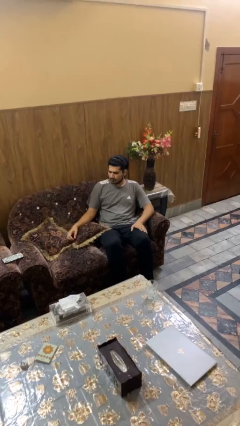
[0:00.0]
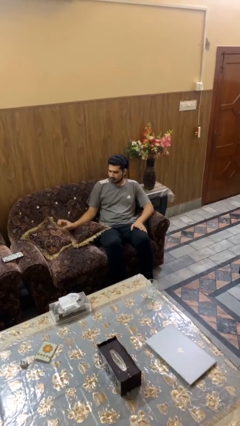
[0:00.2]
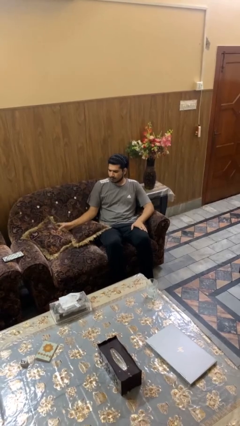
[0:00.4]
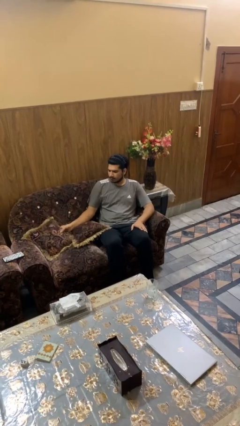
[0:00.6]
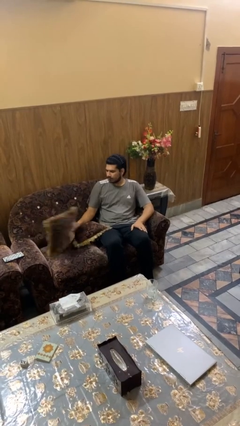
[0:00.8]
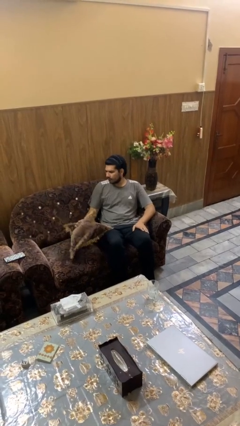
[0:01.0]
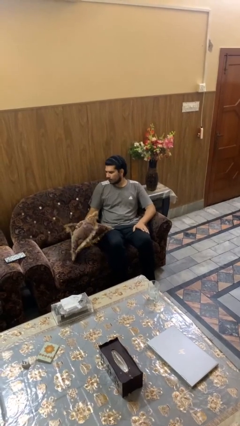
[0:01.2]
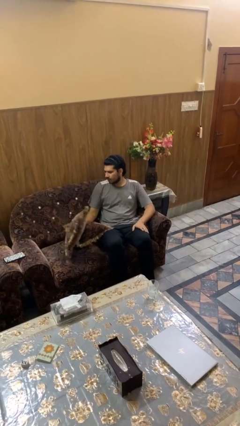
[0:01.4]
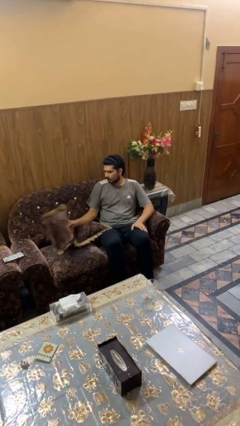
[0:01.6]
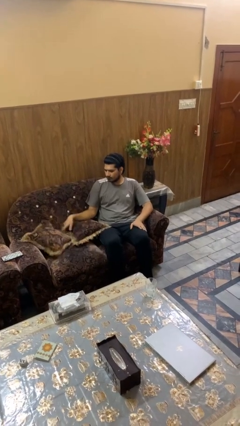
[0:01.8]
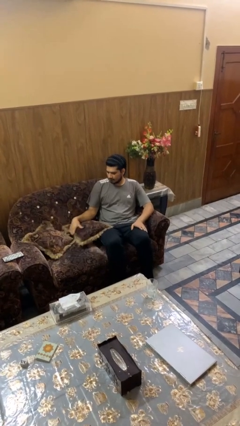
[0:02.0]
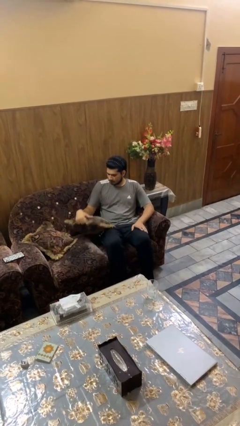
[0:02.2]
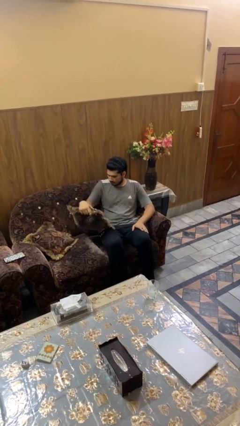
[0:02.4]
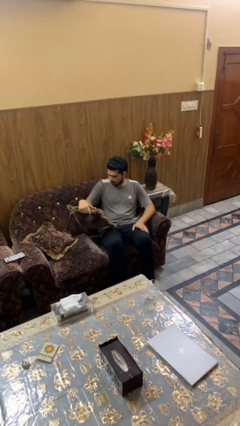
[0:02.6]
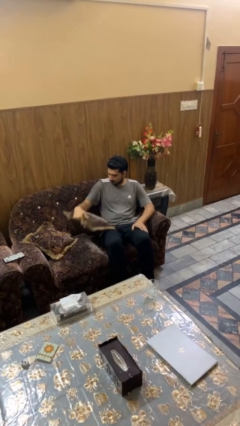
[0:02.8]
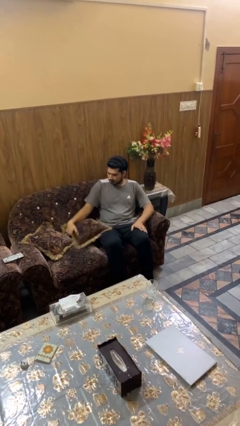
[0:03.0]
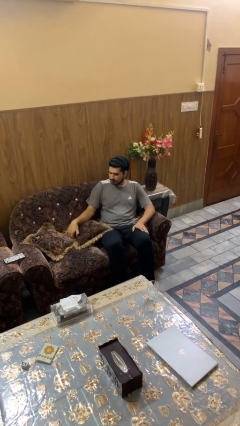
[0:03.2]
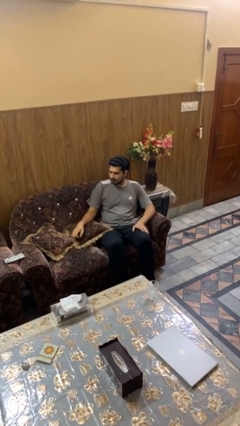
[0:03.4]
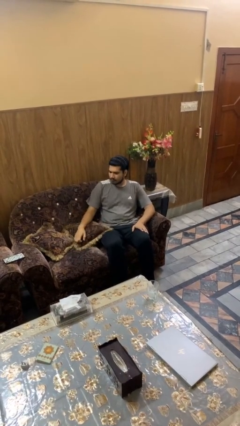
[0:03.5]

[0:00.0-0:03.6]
person searches in couch

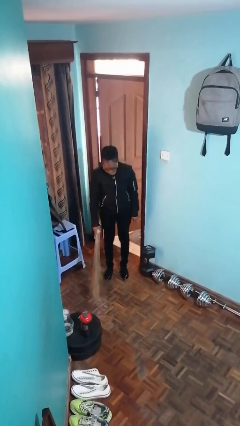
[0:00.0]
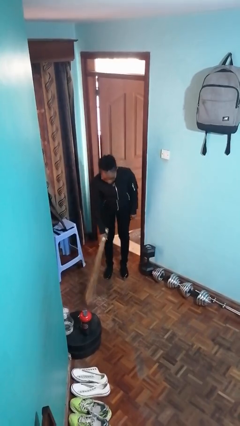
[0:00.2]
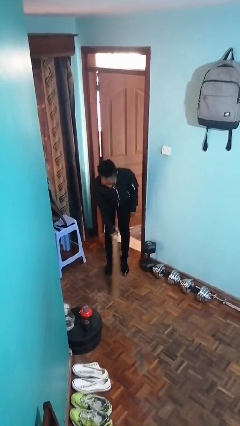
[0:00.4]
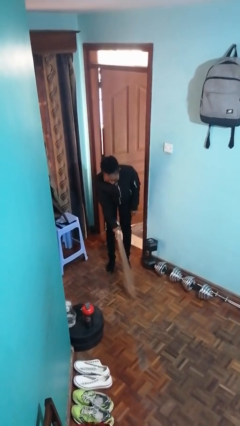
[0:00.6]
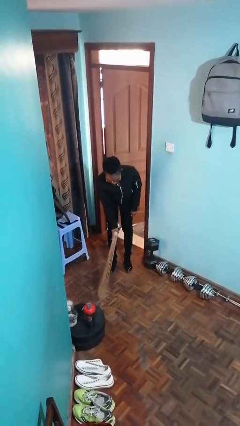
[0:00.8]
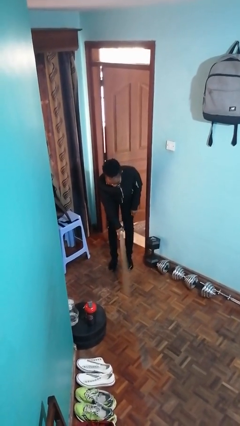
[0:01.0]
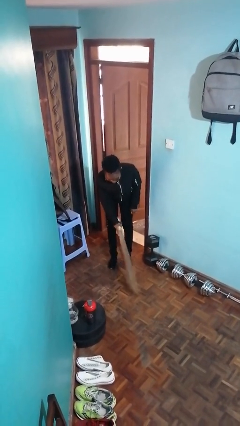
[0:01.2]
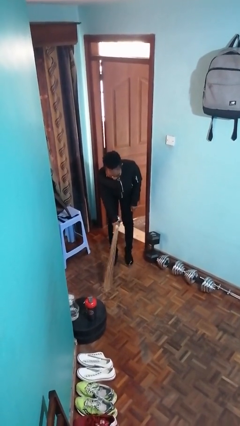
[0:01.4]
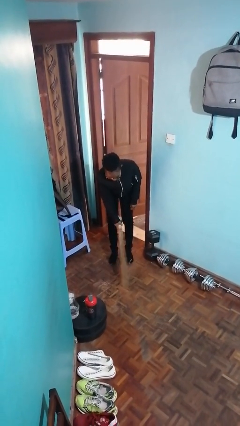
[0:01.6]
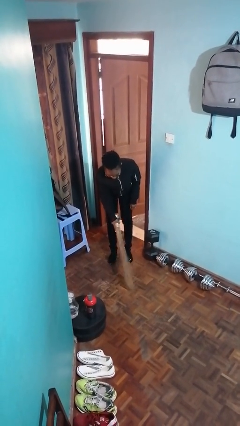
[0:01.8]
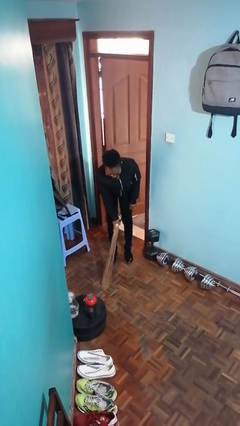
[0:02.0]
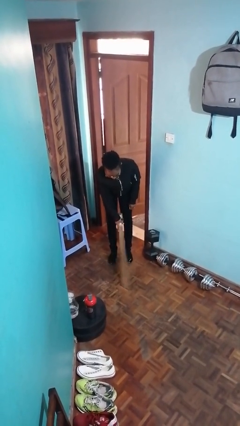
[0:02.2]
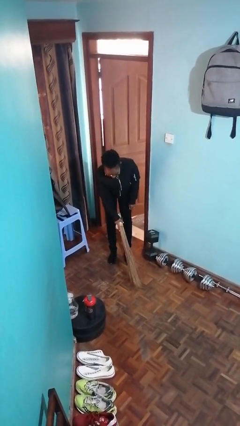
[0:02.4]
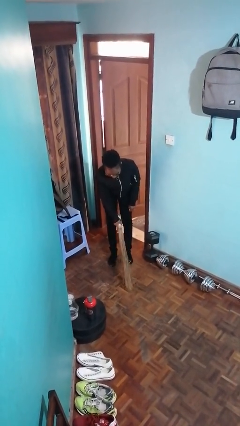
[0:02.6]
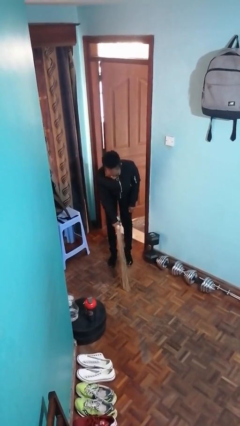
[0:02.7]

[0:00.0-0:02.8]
person sweeps floor

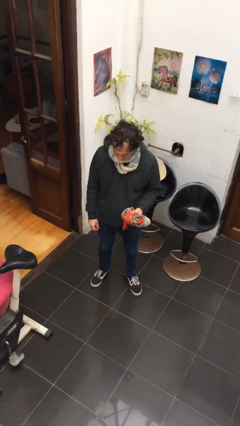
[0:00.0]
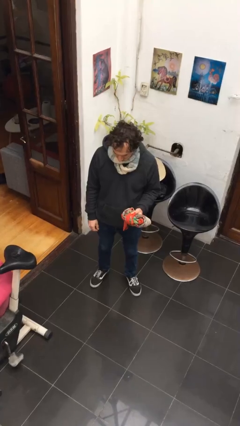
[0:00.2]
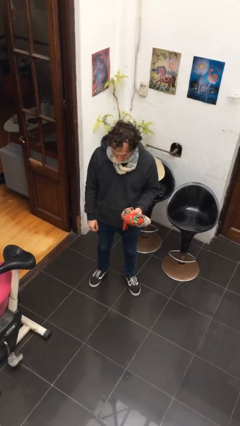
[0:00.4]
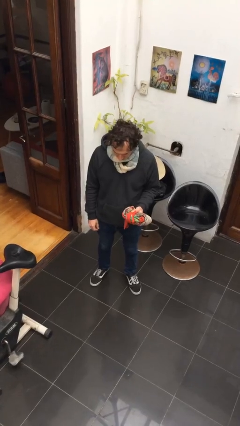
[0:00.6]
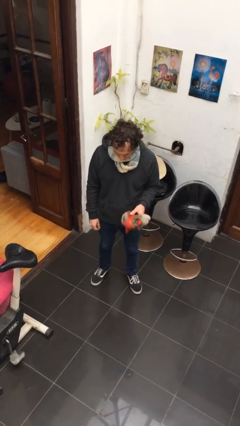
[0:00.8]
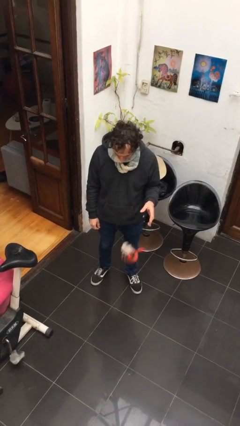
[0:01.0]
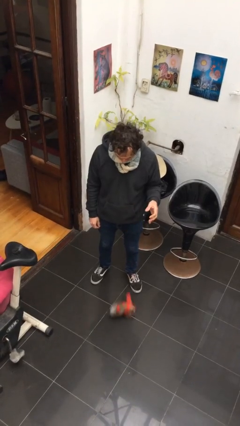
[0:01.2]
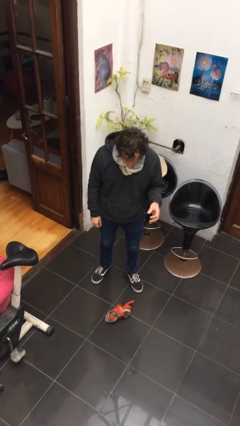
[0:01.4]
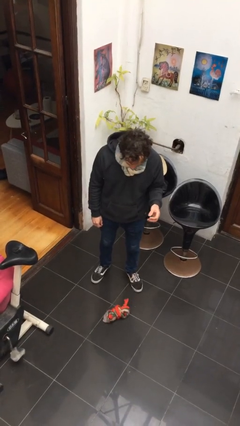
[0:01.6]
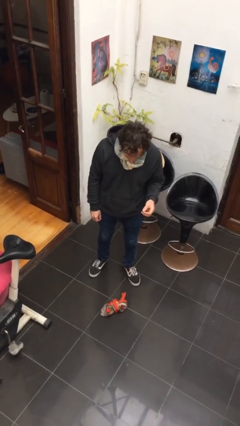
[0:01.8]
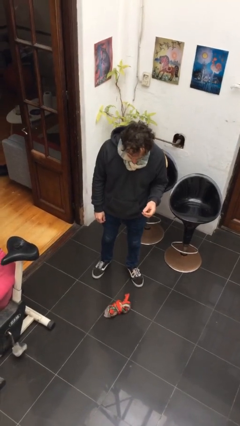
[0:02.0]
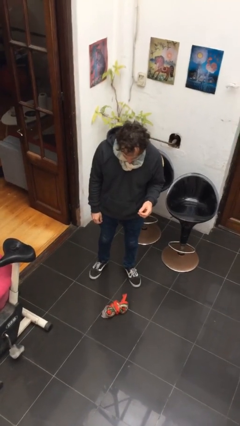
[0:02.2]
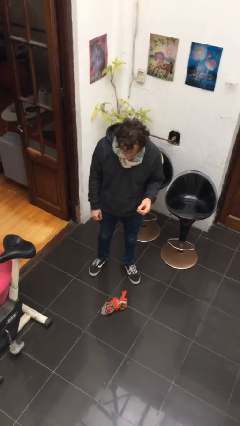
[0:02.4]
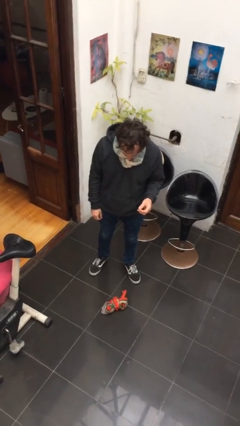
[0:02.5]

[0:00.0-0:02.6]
person drops object

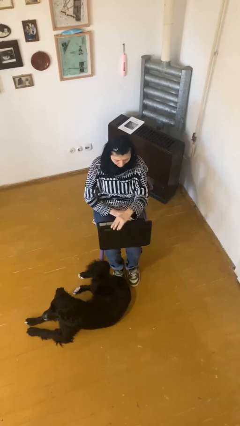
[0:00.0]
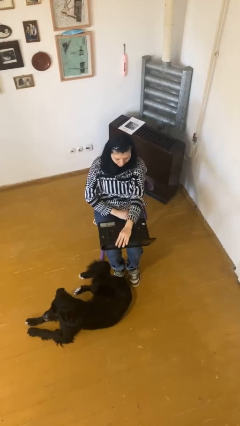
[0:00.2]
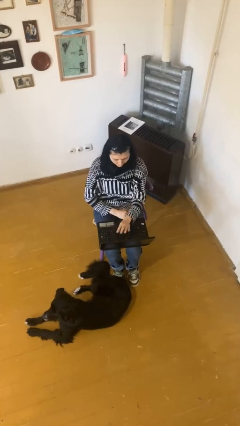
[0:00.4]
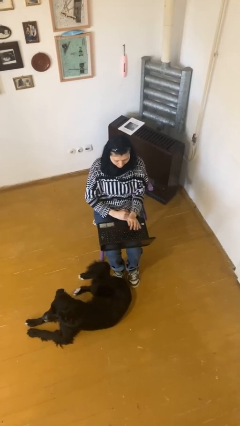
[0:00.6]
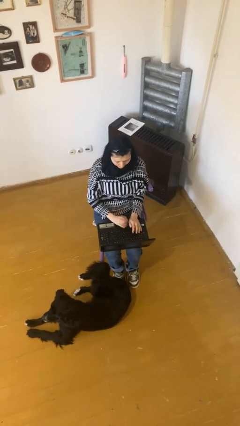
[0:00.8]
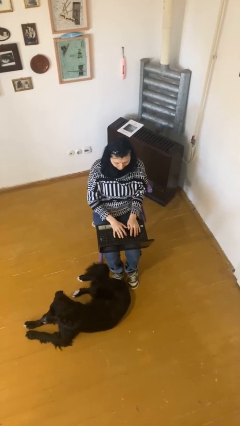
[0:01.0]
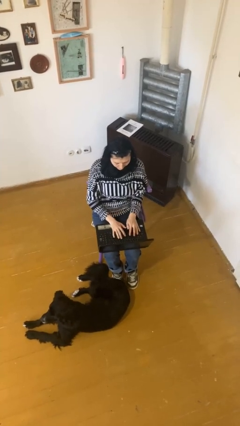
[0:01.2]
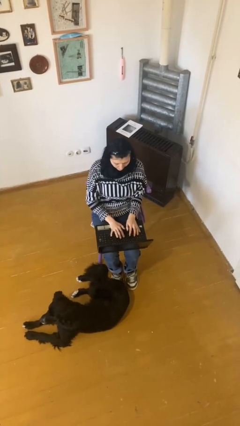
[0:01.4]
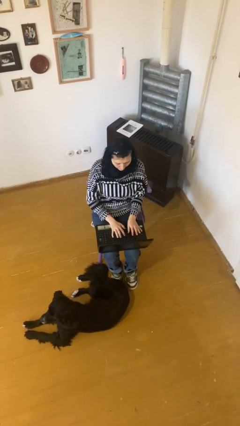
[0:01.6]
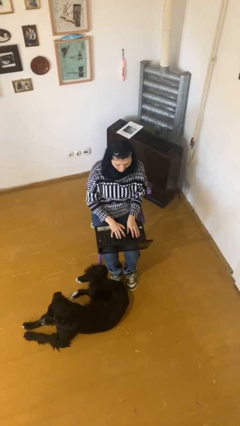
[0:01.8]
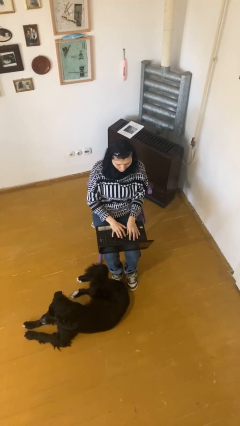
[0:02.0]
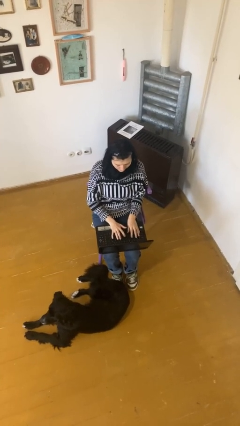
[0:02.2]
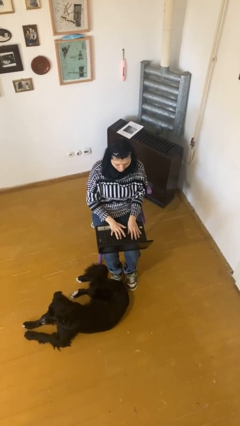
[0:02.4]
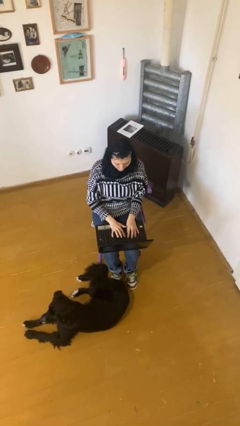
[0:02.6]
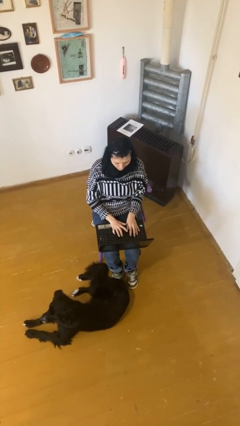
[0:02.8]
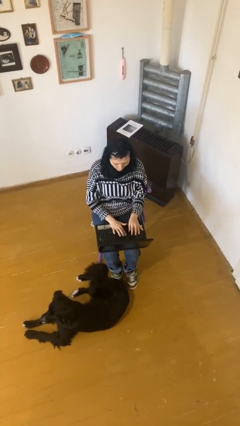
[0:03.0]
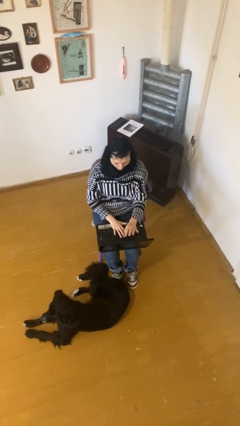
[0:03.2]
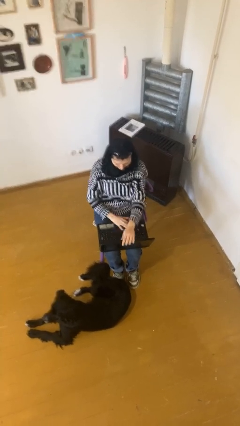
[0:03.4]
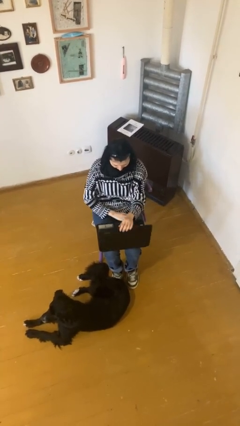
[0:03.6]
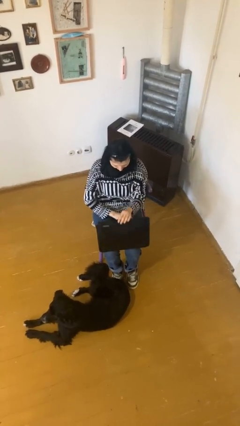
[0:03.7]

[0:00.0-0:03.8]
person interacts with laptop

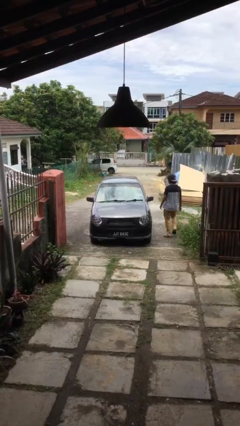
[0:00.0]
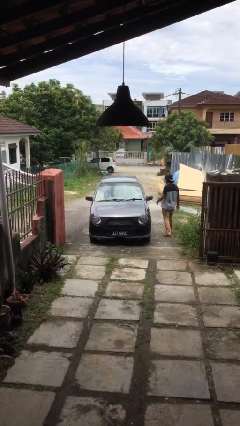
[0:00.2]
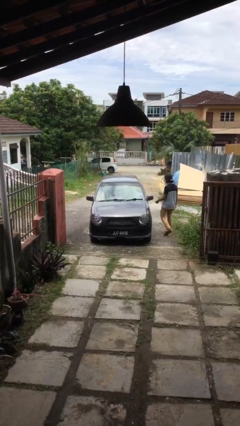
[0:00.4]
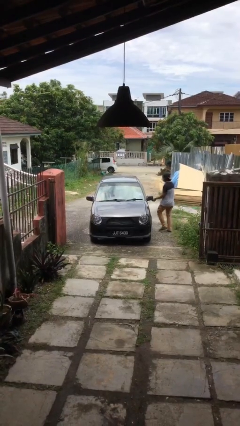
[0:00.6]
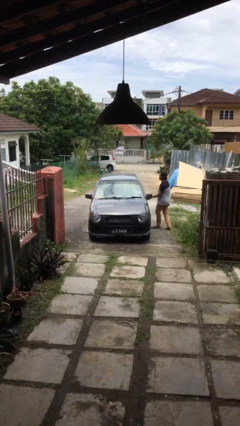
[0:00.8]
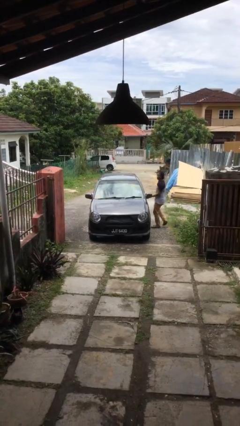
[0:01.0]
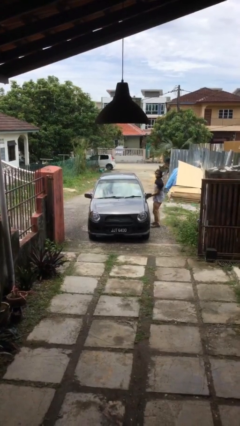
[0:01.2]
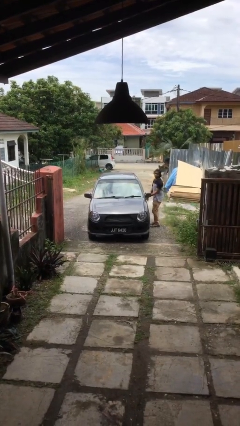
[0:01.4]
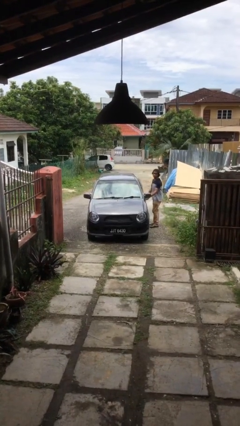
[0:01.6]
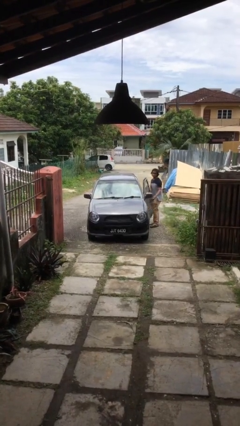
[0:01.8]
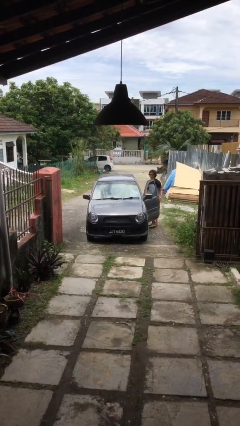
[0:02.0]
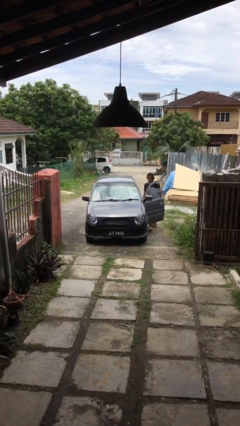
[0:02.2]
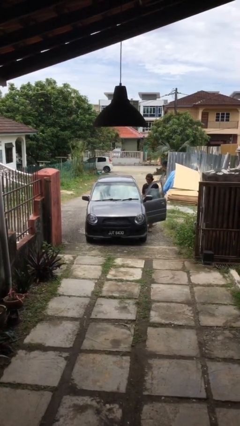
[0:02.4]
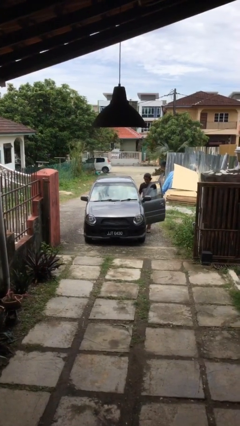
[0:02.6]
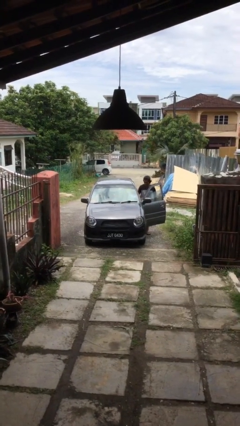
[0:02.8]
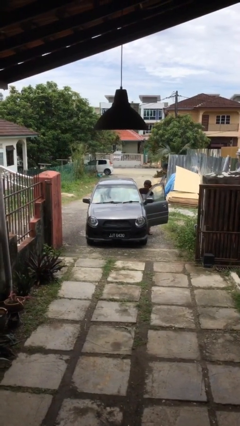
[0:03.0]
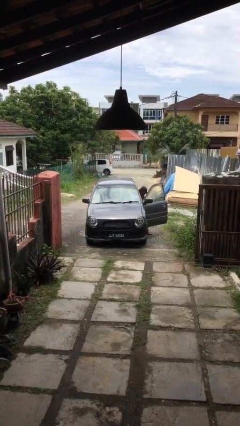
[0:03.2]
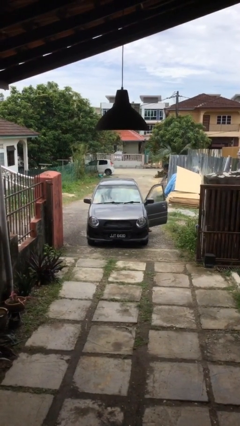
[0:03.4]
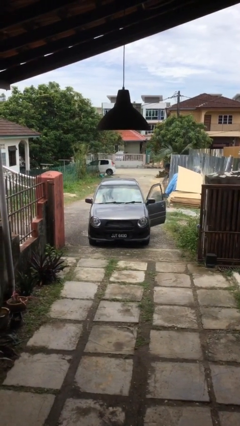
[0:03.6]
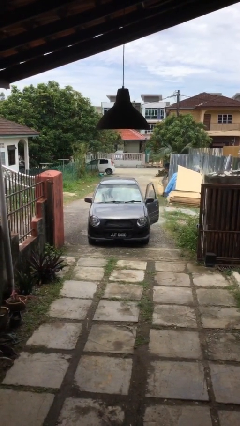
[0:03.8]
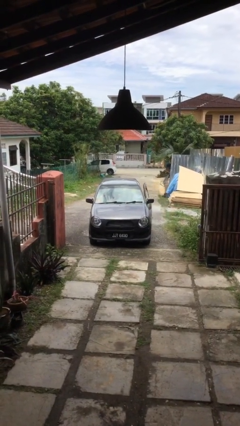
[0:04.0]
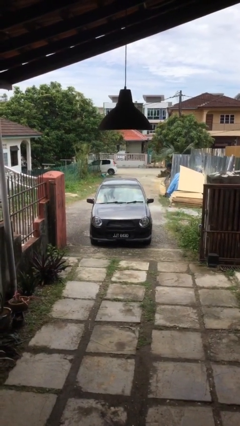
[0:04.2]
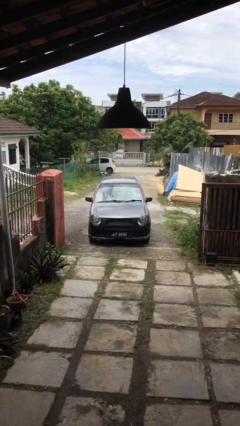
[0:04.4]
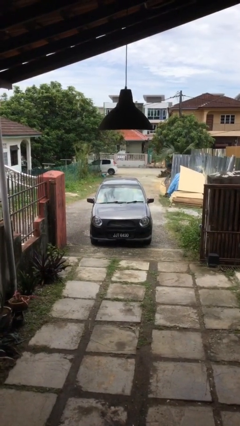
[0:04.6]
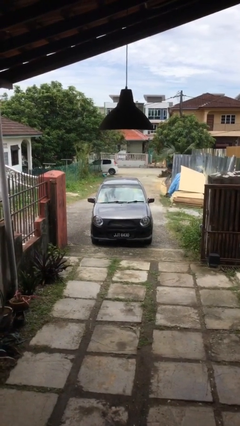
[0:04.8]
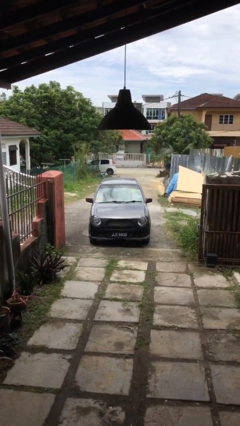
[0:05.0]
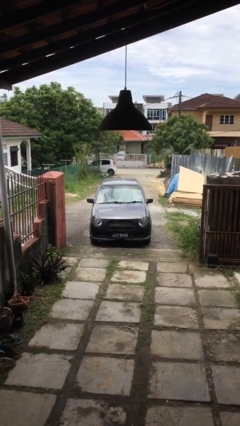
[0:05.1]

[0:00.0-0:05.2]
car picks up person
